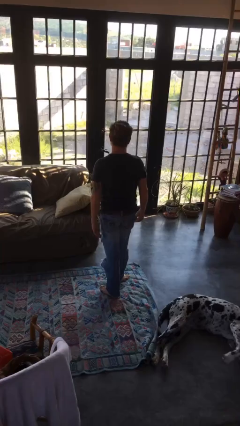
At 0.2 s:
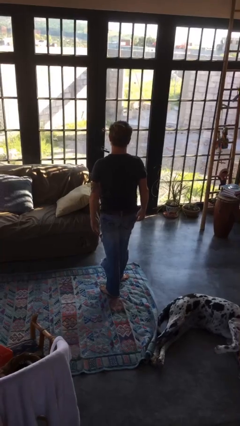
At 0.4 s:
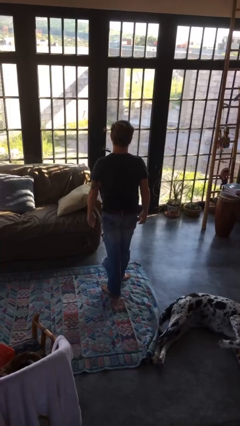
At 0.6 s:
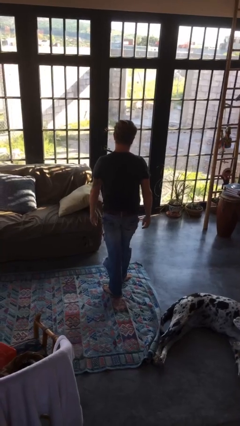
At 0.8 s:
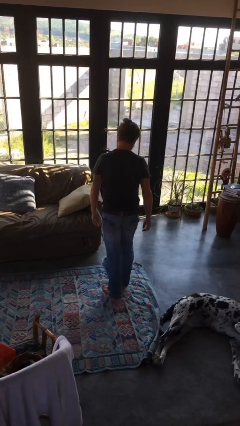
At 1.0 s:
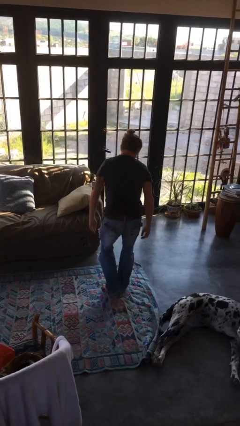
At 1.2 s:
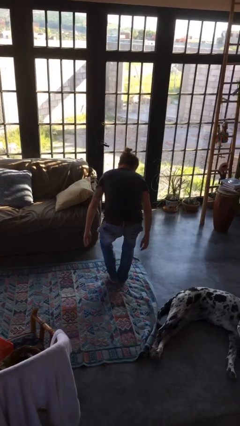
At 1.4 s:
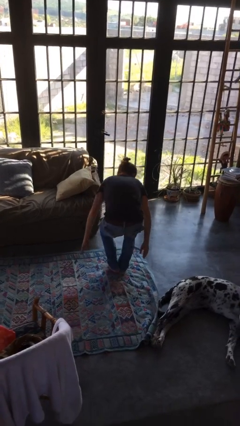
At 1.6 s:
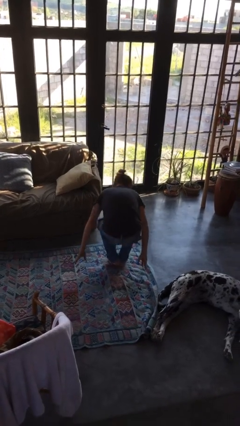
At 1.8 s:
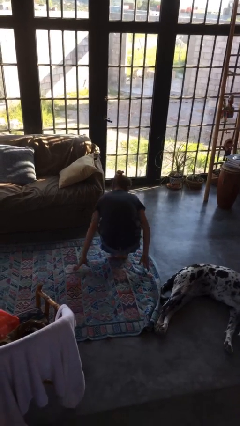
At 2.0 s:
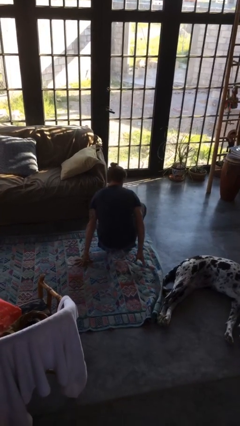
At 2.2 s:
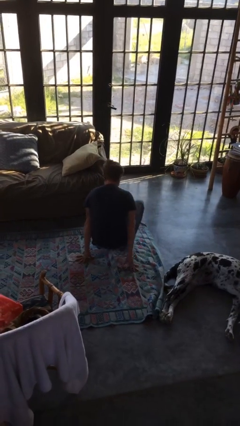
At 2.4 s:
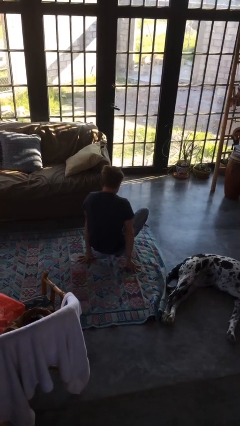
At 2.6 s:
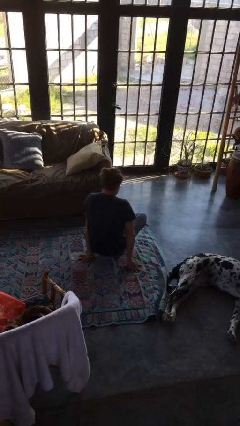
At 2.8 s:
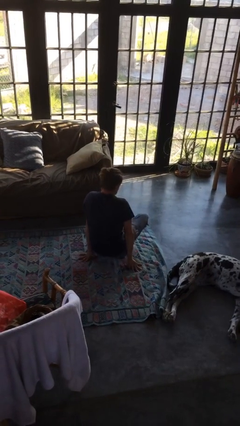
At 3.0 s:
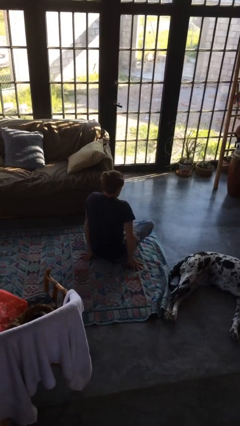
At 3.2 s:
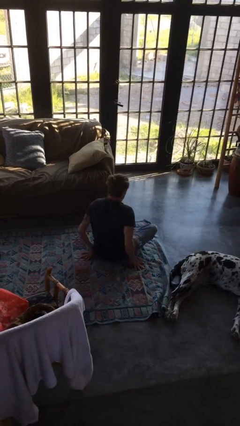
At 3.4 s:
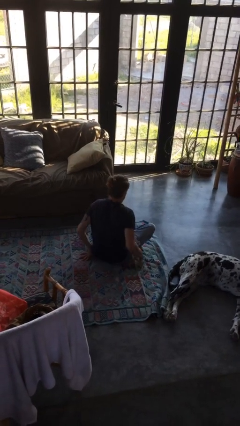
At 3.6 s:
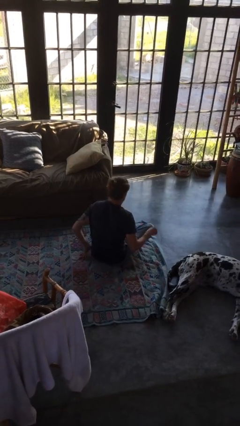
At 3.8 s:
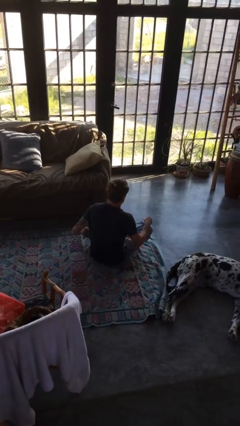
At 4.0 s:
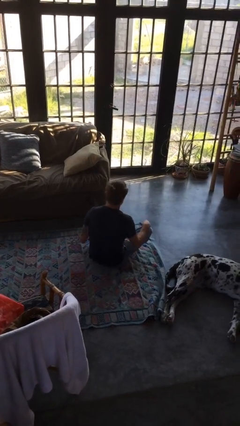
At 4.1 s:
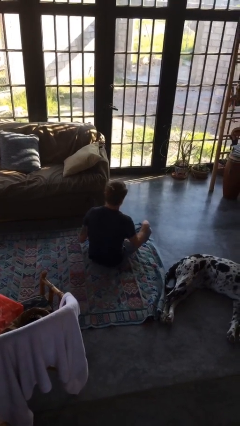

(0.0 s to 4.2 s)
person sits crisscross

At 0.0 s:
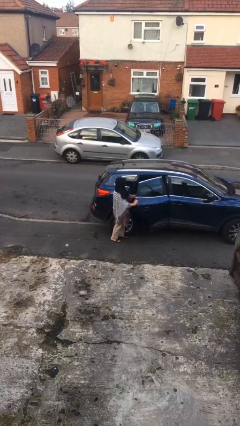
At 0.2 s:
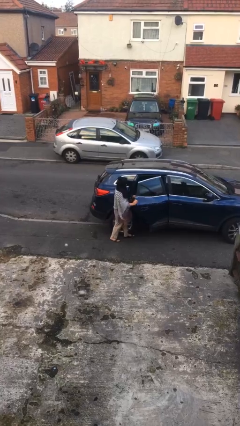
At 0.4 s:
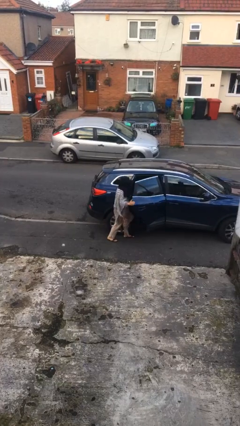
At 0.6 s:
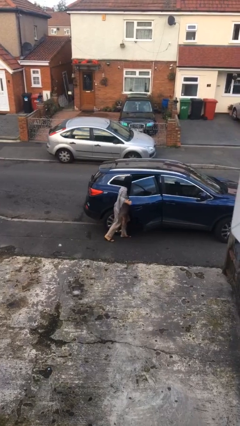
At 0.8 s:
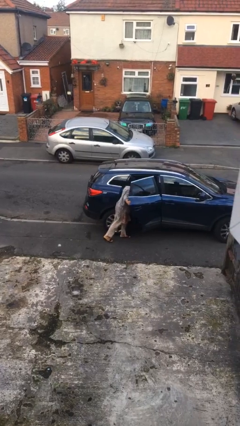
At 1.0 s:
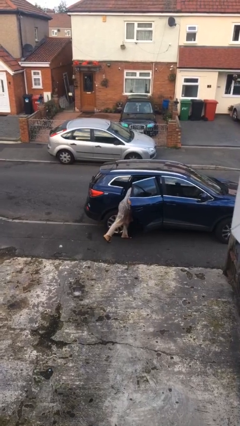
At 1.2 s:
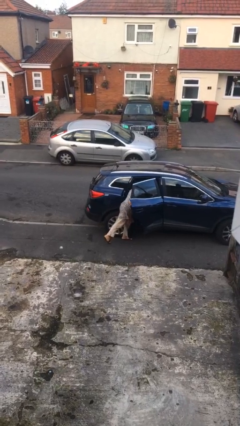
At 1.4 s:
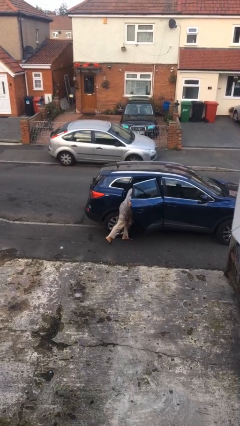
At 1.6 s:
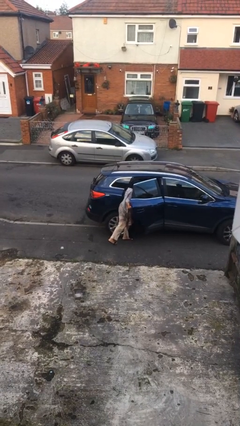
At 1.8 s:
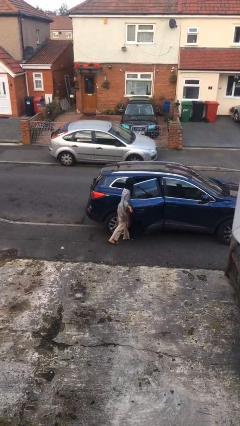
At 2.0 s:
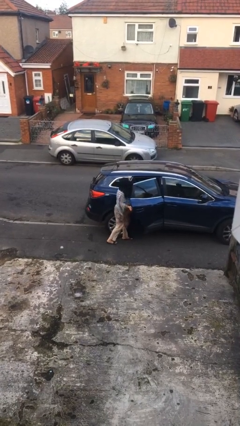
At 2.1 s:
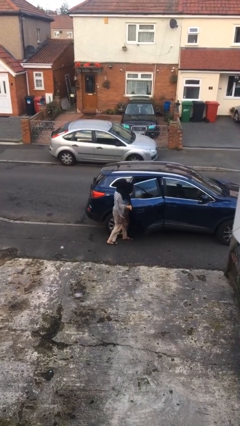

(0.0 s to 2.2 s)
person unloads car

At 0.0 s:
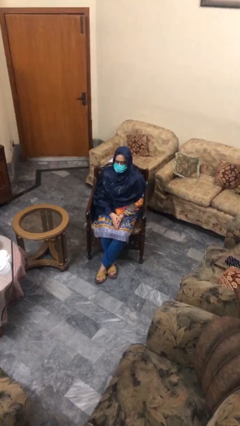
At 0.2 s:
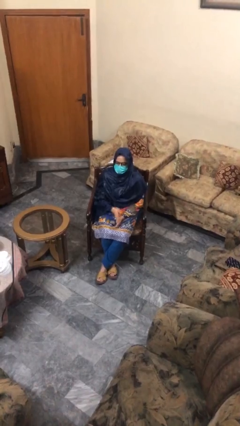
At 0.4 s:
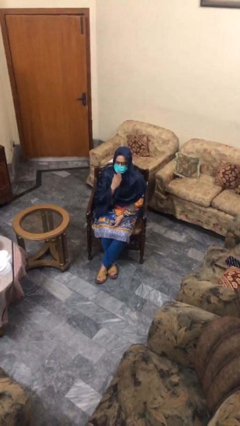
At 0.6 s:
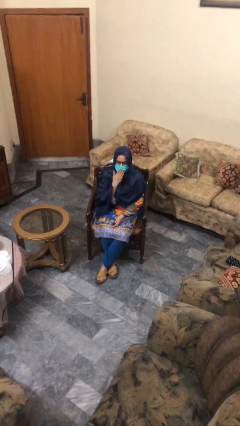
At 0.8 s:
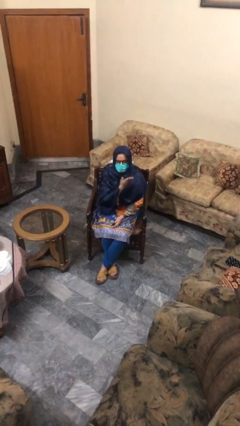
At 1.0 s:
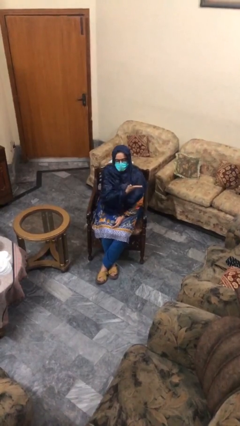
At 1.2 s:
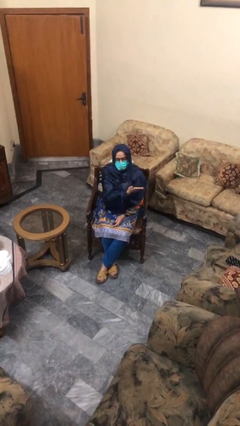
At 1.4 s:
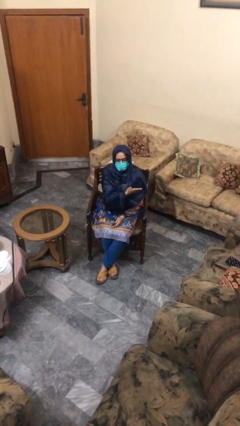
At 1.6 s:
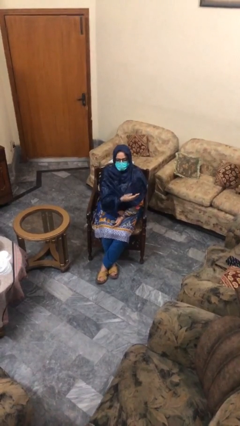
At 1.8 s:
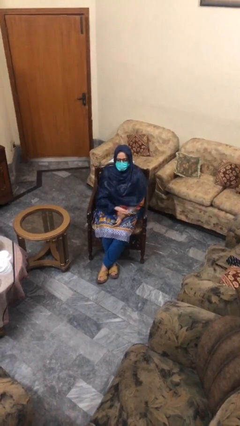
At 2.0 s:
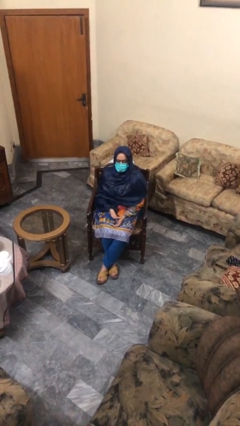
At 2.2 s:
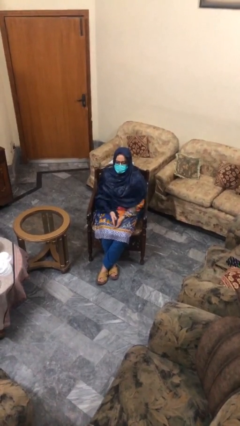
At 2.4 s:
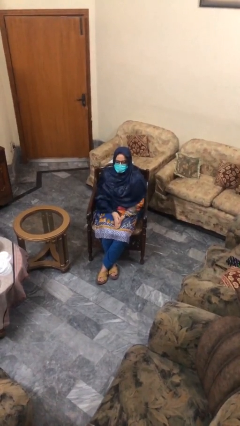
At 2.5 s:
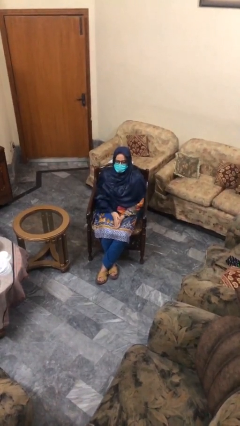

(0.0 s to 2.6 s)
person gestures blow kiss

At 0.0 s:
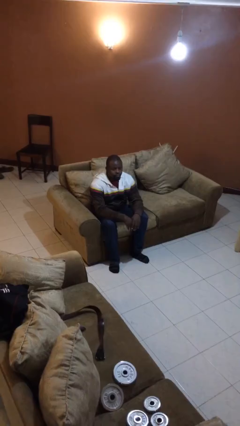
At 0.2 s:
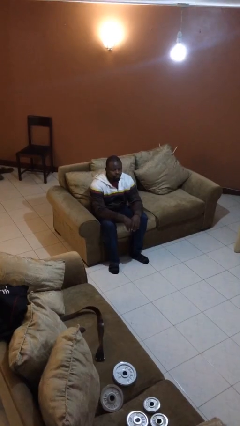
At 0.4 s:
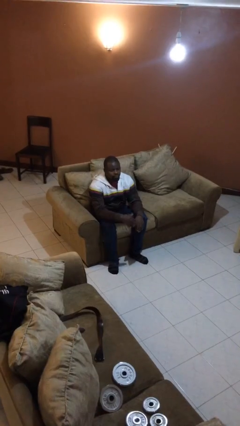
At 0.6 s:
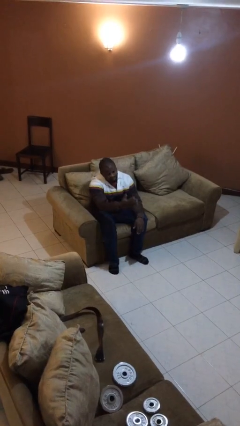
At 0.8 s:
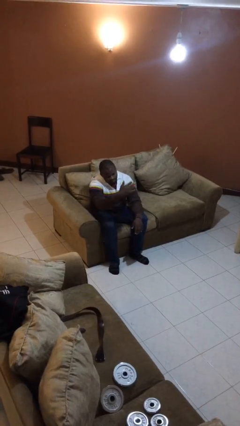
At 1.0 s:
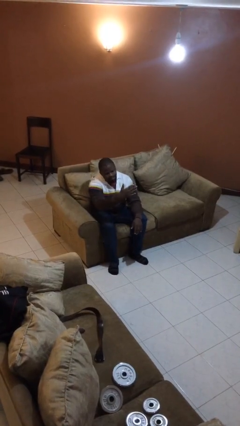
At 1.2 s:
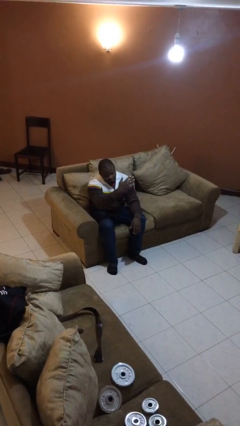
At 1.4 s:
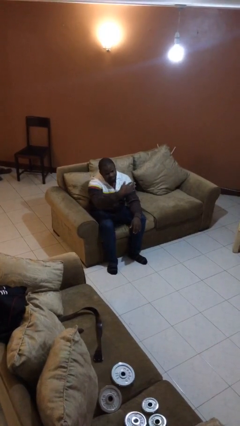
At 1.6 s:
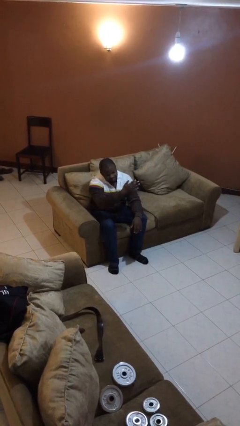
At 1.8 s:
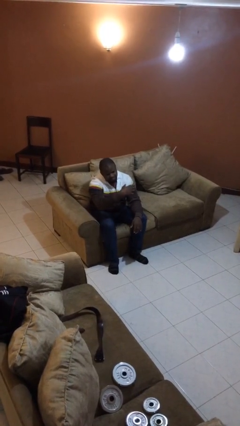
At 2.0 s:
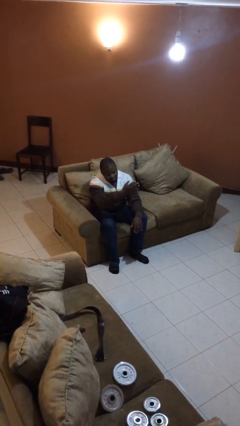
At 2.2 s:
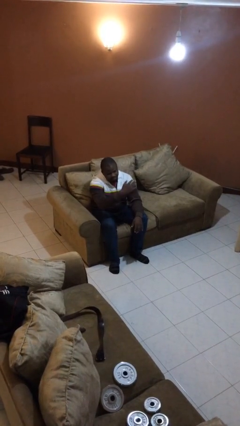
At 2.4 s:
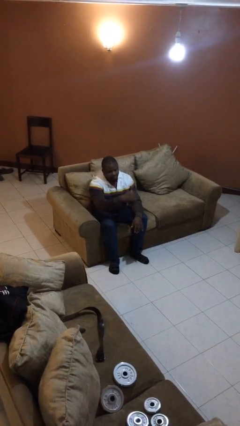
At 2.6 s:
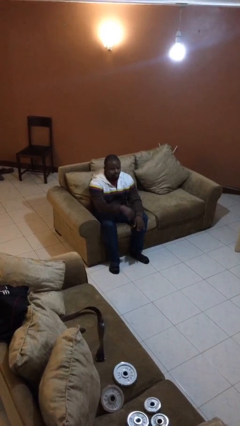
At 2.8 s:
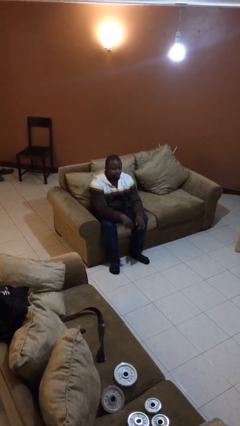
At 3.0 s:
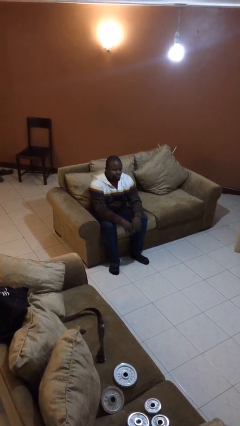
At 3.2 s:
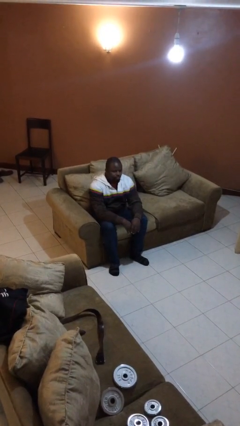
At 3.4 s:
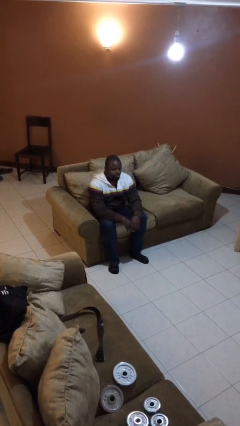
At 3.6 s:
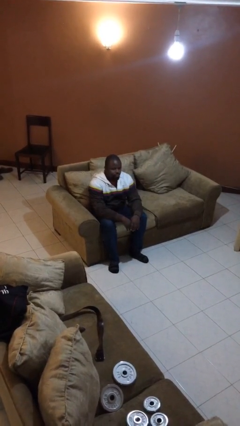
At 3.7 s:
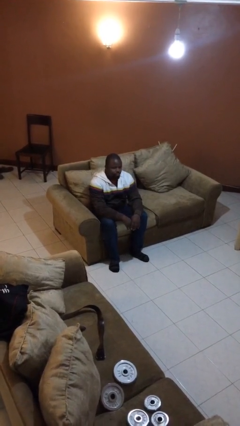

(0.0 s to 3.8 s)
person gestures come here

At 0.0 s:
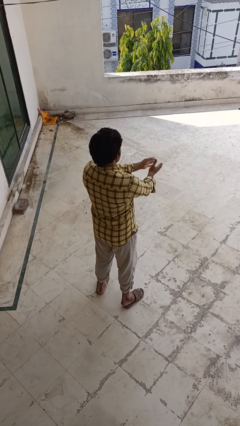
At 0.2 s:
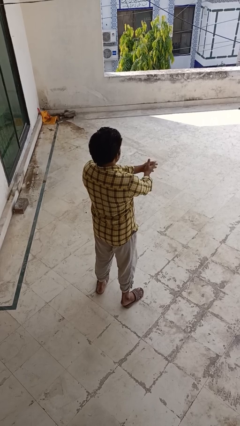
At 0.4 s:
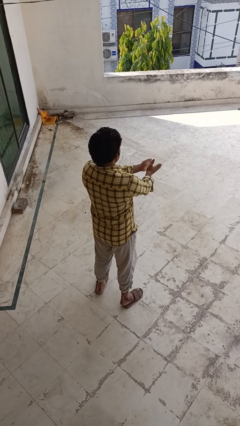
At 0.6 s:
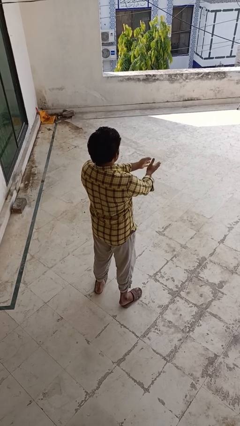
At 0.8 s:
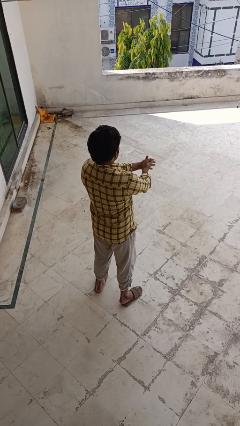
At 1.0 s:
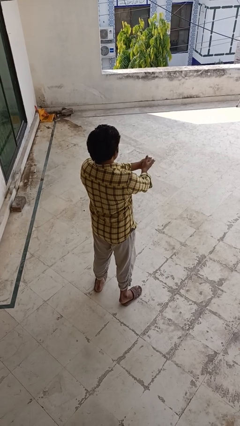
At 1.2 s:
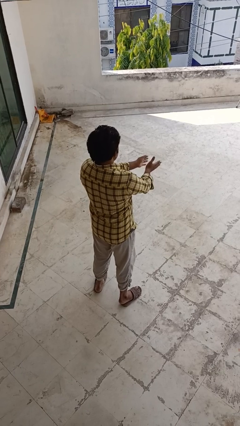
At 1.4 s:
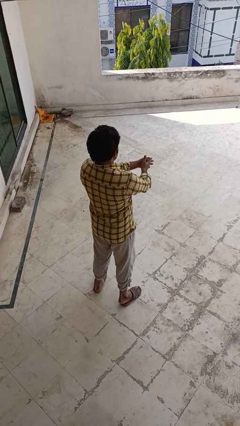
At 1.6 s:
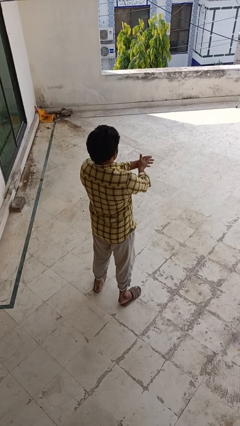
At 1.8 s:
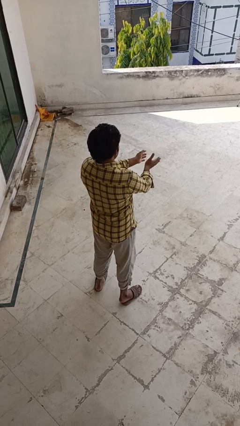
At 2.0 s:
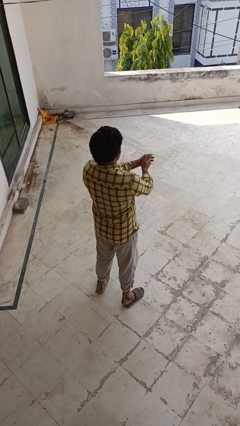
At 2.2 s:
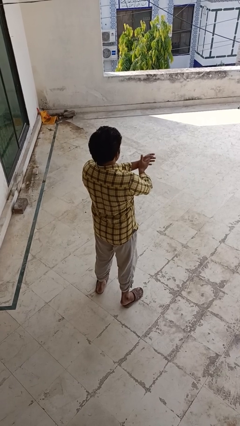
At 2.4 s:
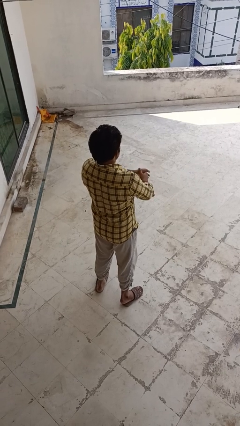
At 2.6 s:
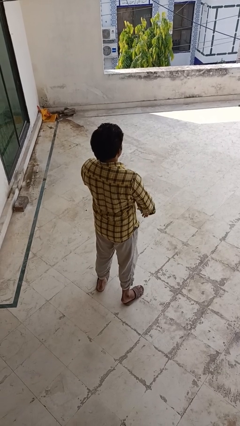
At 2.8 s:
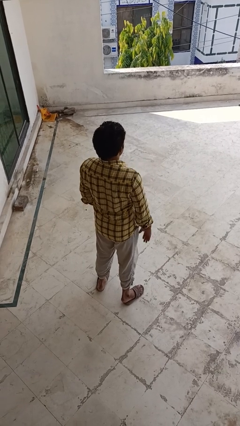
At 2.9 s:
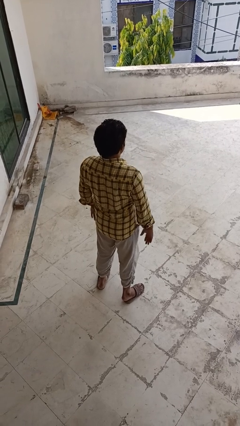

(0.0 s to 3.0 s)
person claps hands

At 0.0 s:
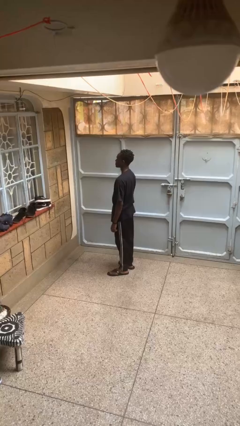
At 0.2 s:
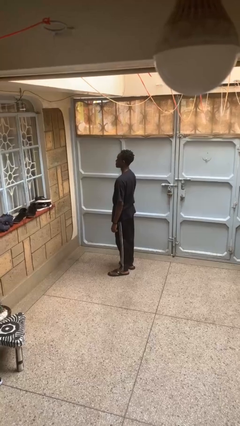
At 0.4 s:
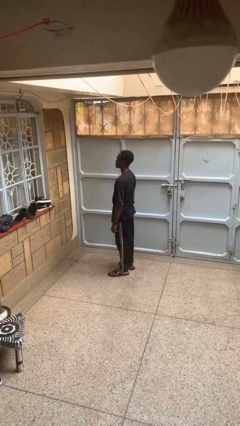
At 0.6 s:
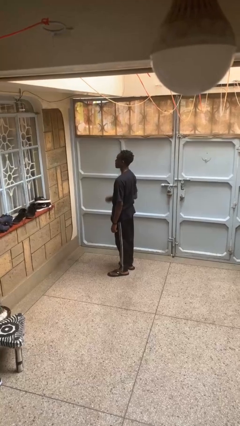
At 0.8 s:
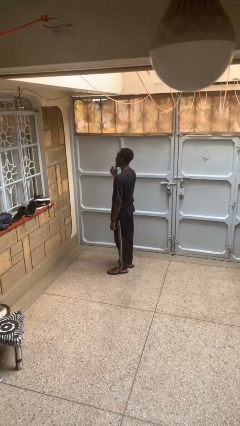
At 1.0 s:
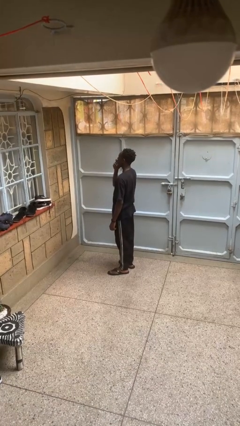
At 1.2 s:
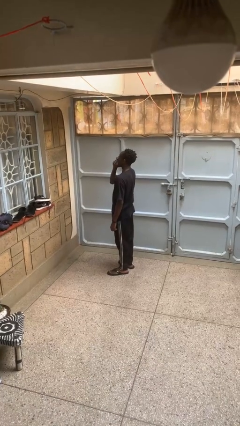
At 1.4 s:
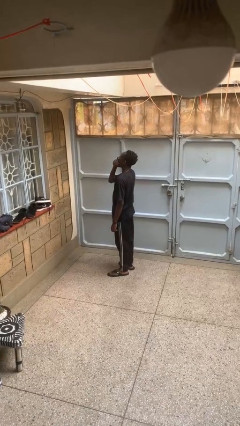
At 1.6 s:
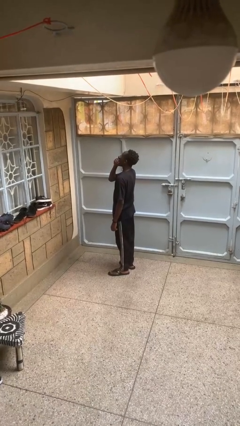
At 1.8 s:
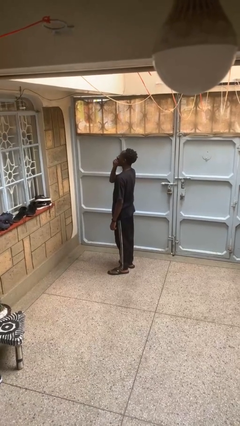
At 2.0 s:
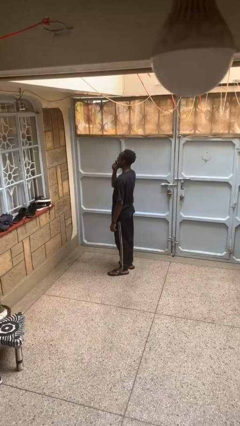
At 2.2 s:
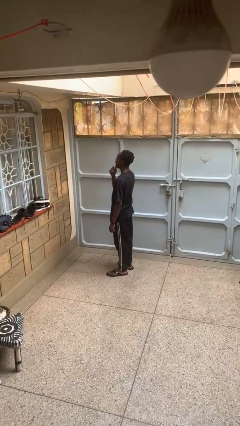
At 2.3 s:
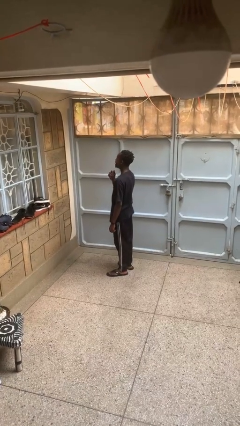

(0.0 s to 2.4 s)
person yawns
